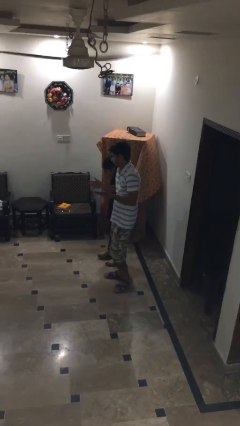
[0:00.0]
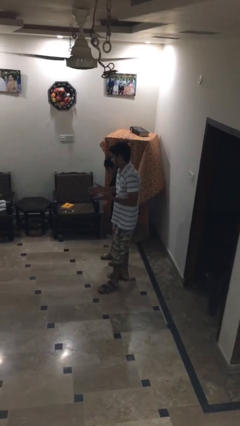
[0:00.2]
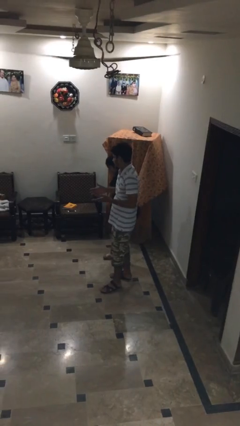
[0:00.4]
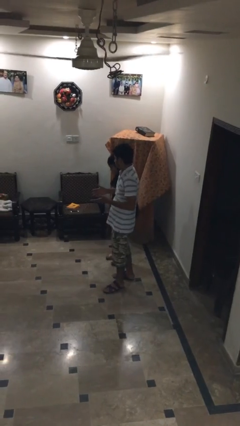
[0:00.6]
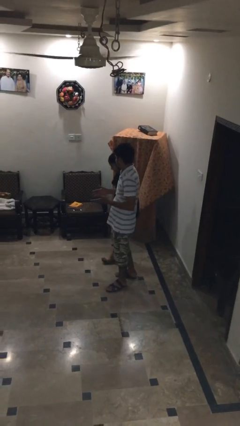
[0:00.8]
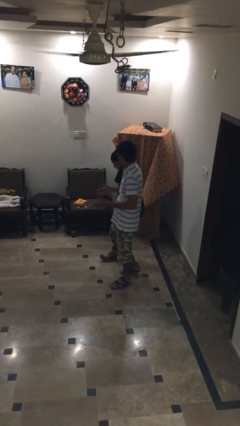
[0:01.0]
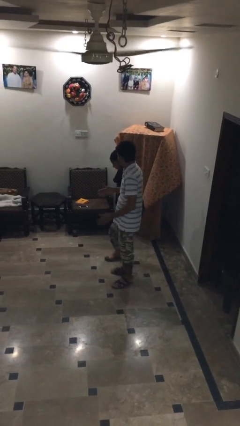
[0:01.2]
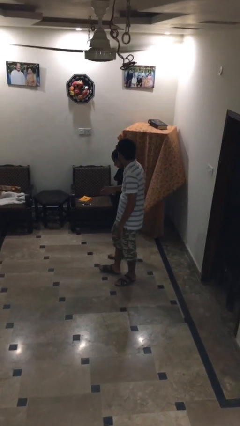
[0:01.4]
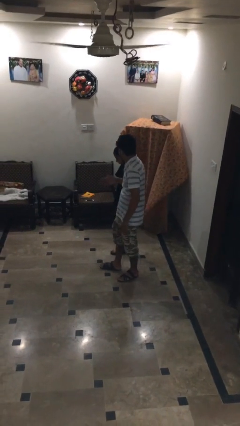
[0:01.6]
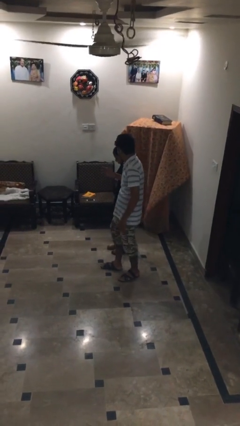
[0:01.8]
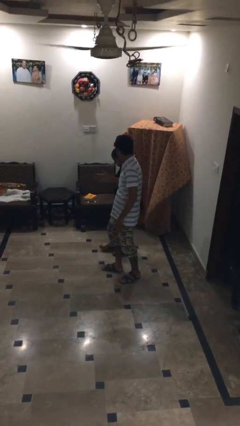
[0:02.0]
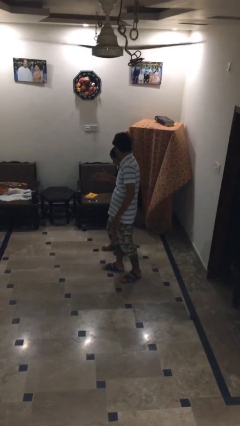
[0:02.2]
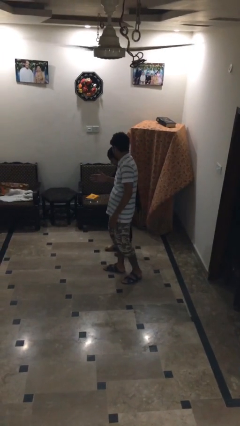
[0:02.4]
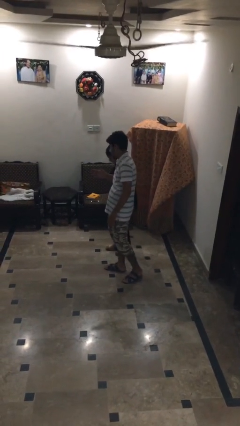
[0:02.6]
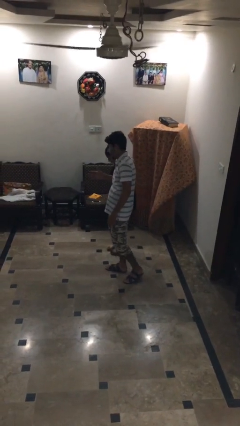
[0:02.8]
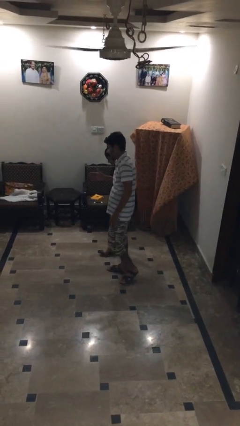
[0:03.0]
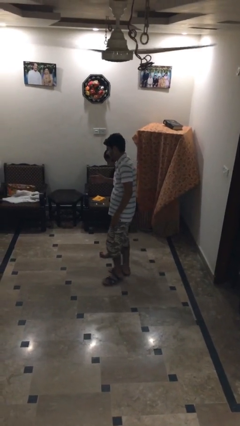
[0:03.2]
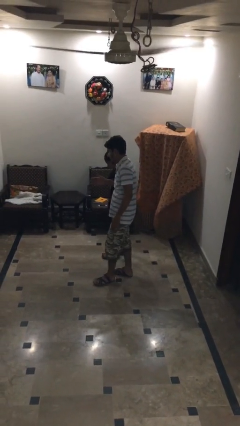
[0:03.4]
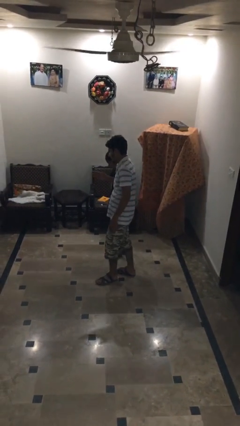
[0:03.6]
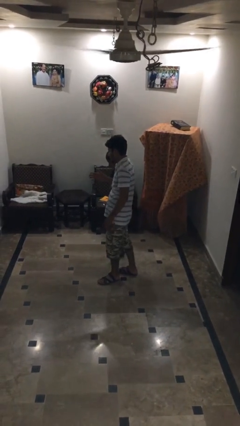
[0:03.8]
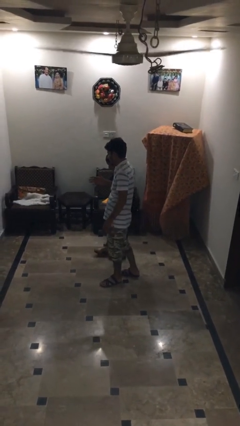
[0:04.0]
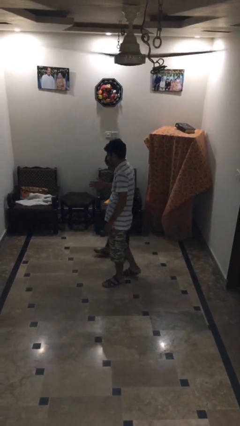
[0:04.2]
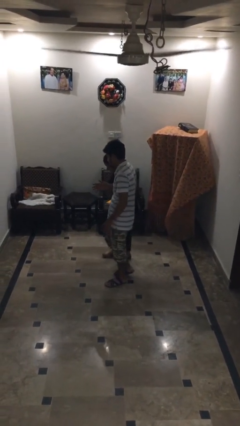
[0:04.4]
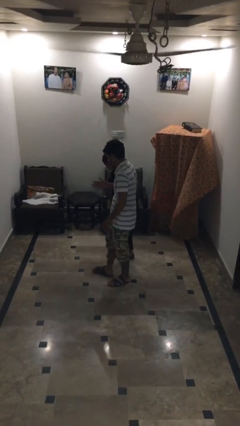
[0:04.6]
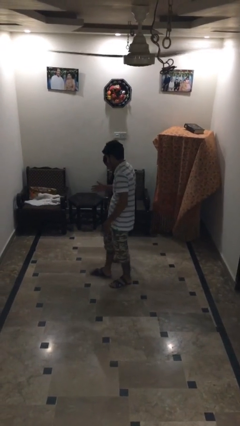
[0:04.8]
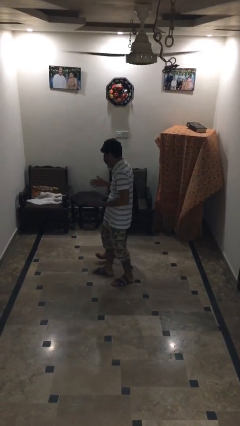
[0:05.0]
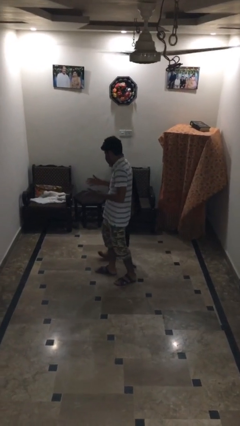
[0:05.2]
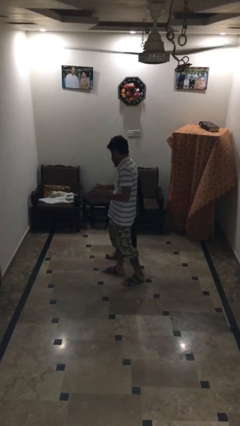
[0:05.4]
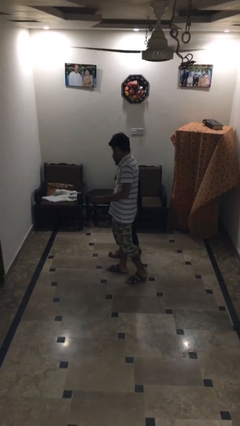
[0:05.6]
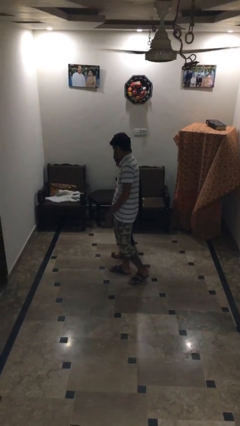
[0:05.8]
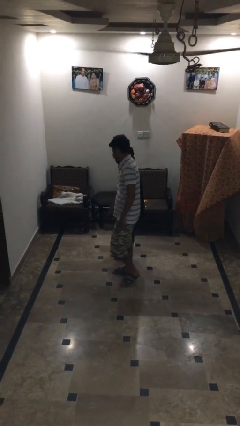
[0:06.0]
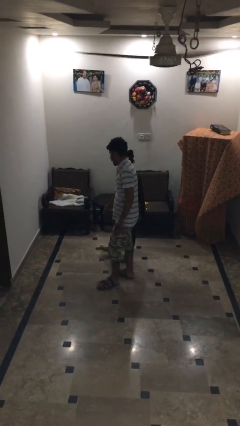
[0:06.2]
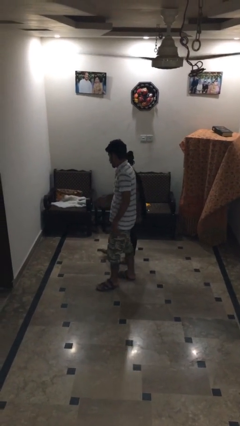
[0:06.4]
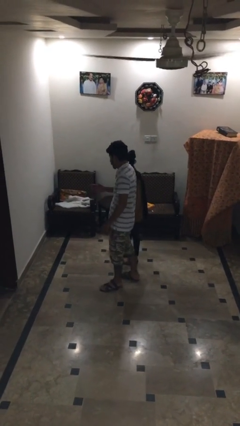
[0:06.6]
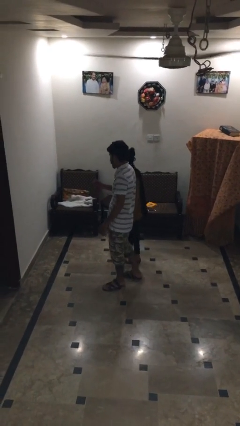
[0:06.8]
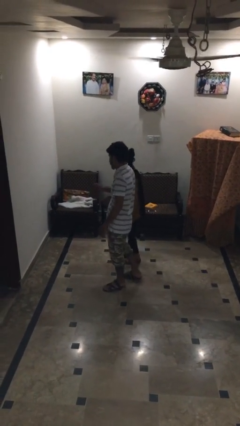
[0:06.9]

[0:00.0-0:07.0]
person talks to person

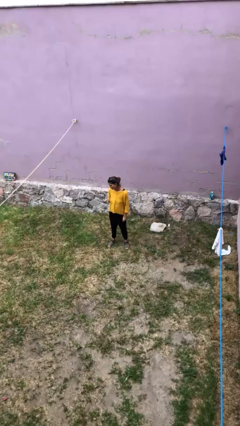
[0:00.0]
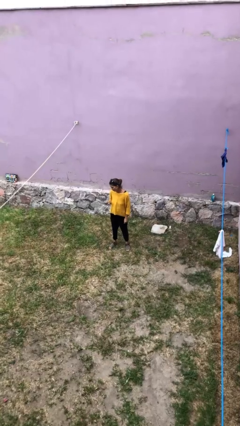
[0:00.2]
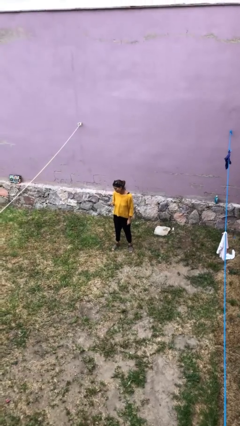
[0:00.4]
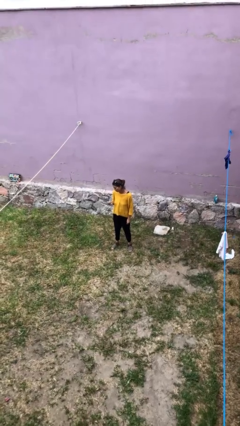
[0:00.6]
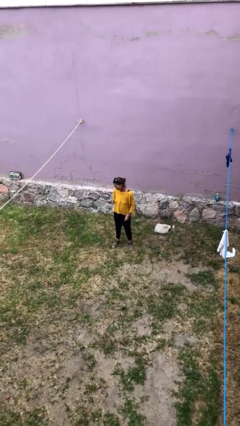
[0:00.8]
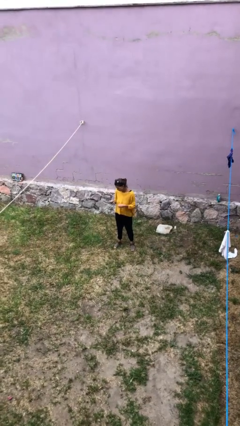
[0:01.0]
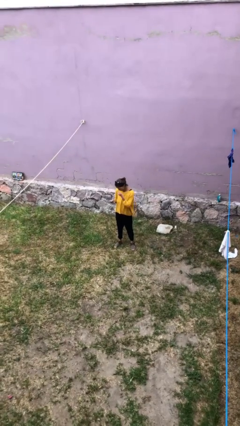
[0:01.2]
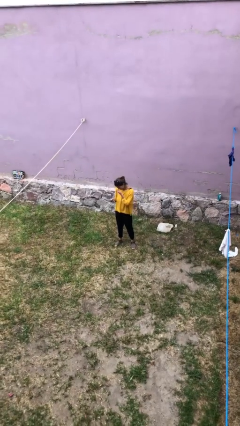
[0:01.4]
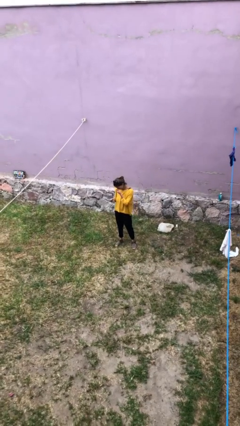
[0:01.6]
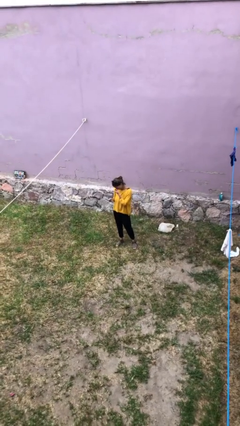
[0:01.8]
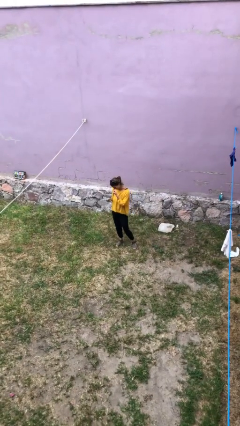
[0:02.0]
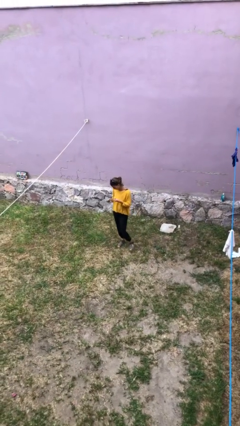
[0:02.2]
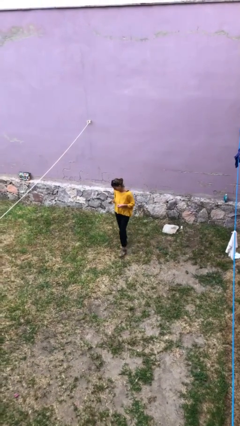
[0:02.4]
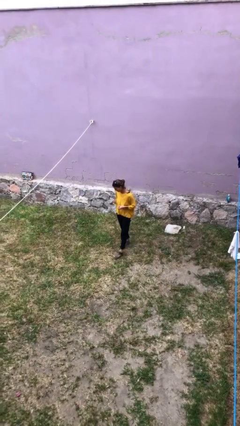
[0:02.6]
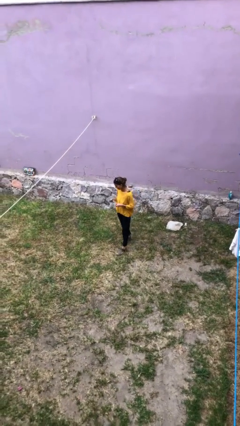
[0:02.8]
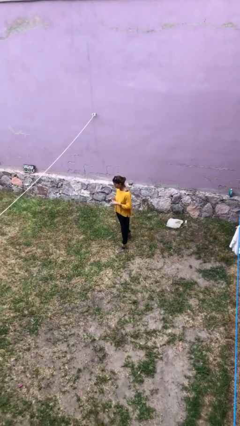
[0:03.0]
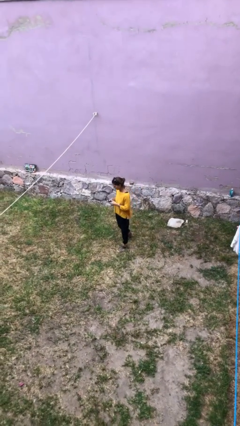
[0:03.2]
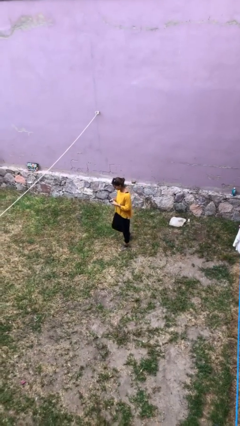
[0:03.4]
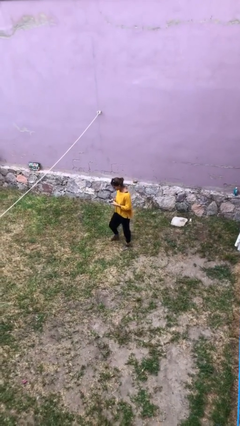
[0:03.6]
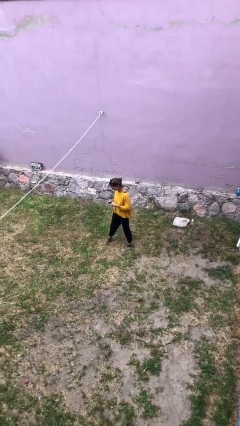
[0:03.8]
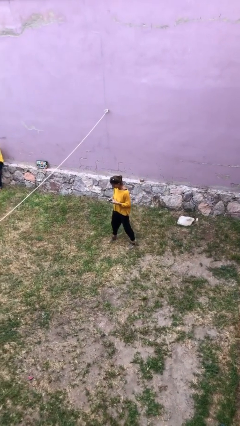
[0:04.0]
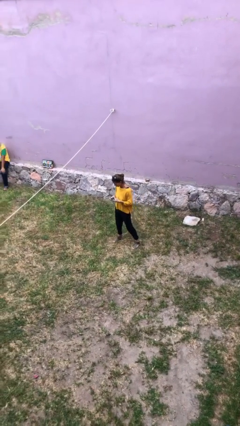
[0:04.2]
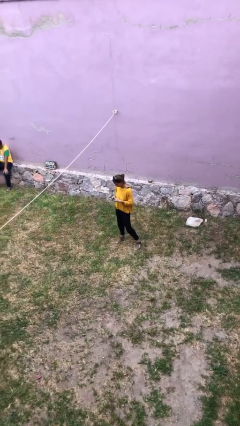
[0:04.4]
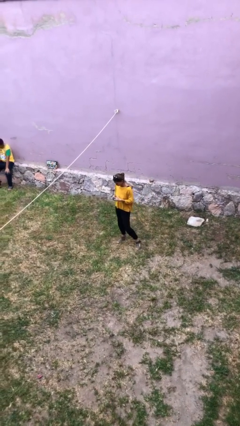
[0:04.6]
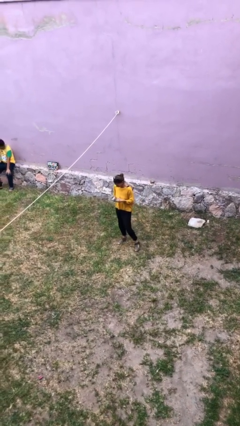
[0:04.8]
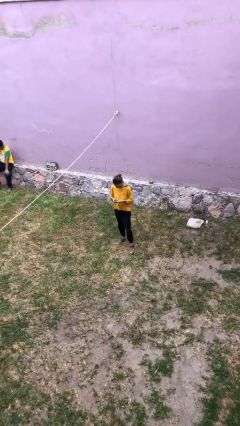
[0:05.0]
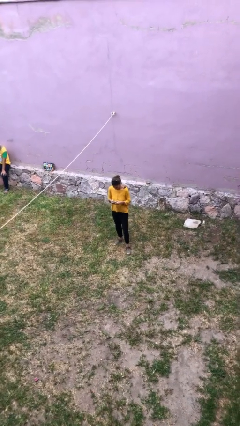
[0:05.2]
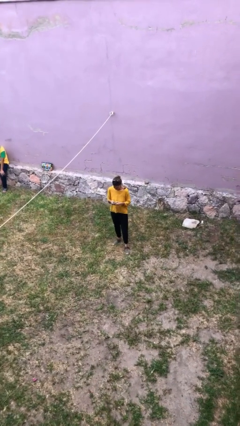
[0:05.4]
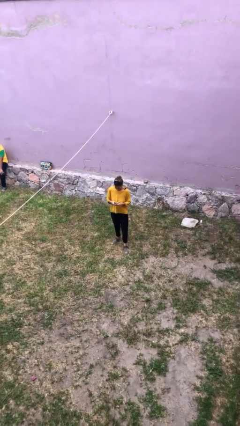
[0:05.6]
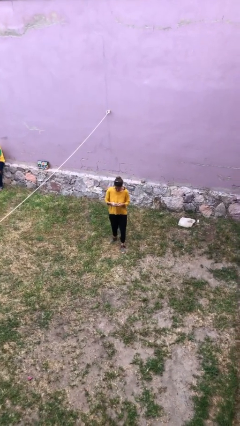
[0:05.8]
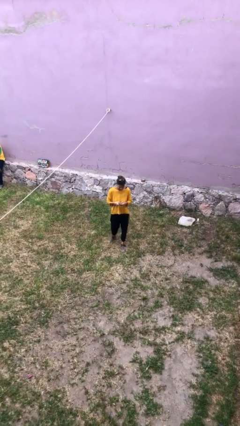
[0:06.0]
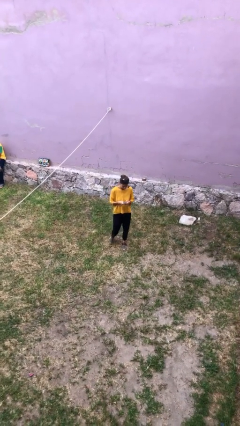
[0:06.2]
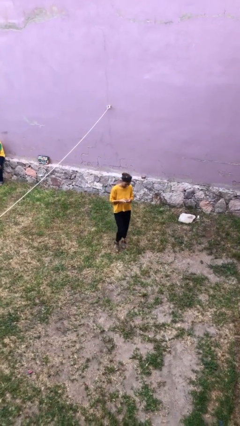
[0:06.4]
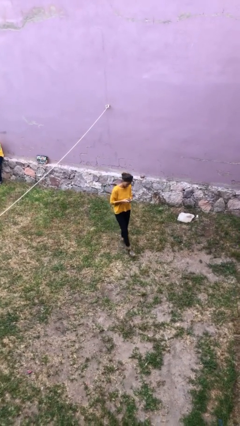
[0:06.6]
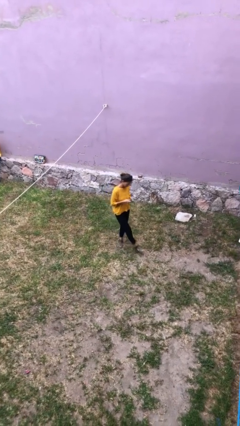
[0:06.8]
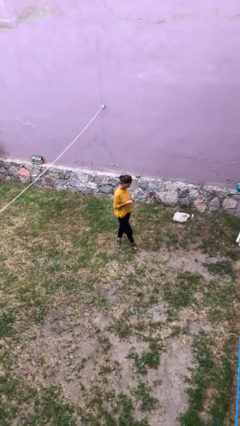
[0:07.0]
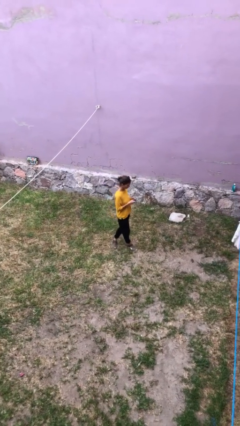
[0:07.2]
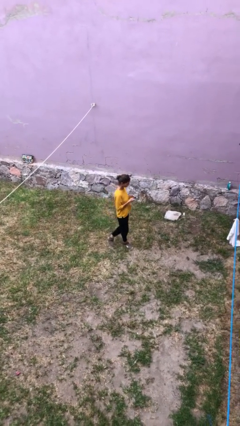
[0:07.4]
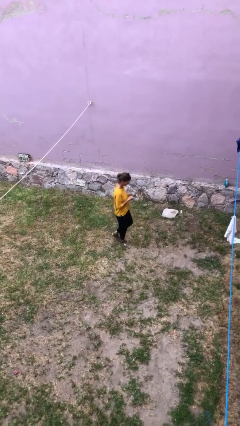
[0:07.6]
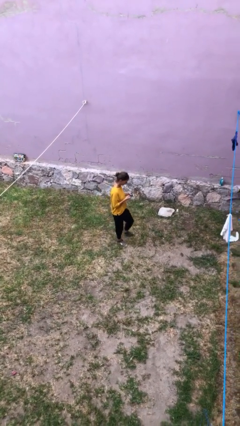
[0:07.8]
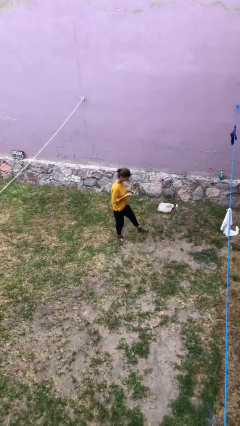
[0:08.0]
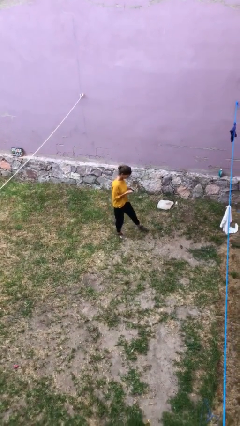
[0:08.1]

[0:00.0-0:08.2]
person texts on phone

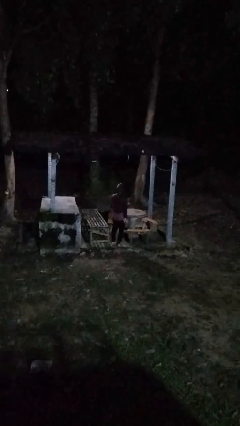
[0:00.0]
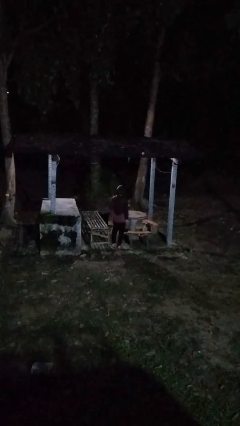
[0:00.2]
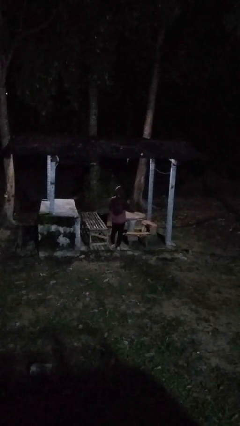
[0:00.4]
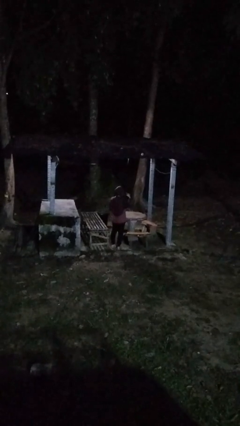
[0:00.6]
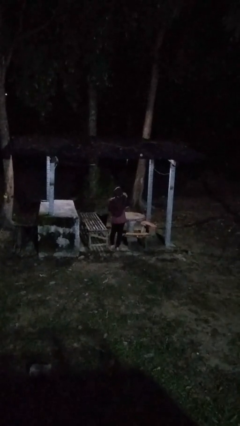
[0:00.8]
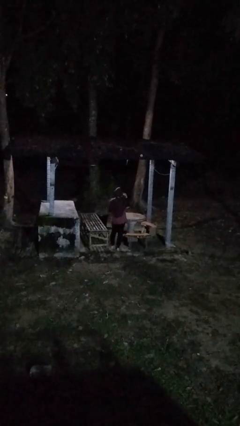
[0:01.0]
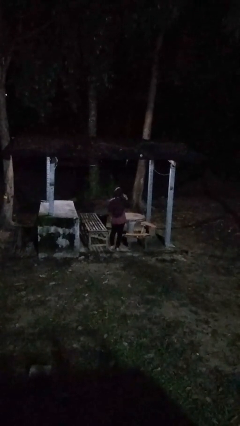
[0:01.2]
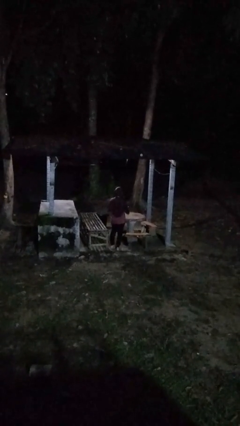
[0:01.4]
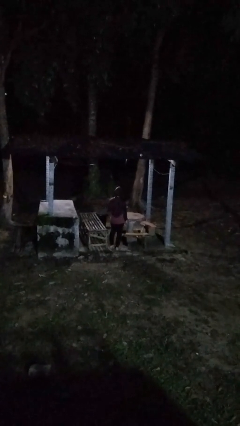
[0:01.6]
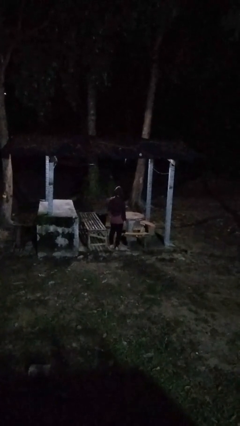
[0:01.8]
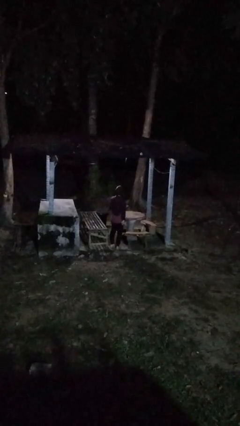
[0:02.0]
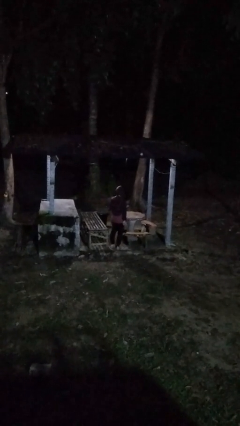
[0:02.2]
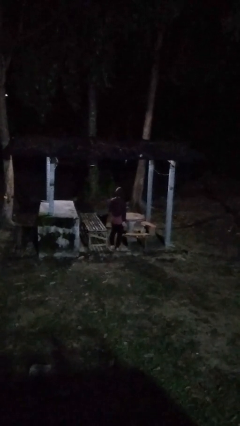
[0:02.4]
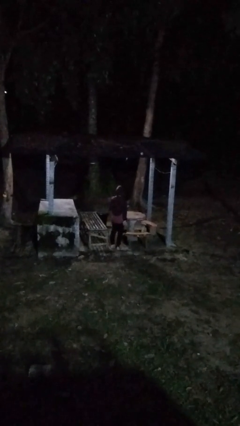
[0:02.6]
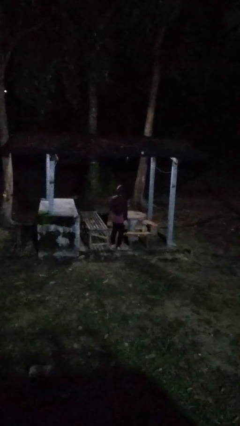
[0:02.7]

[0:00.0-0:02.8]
person gestures watch closely

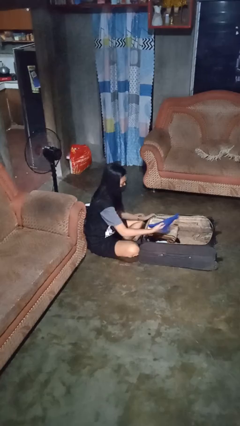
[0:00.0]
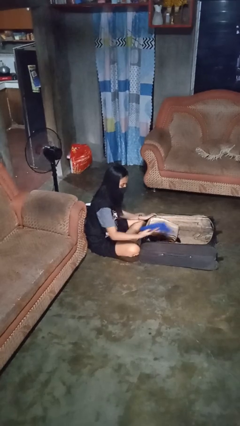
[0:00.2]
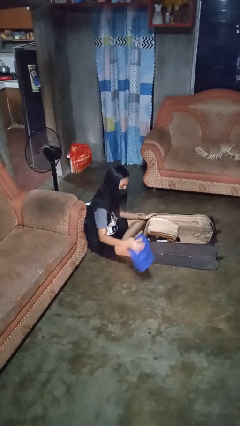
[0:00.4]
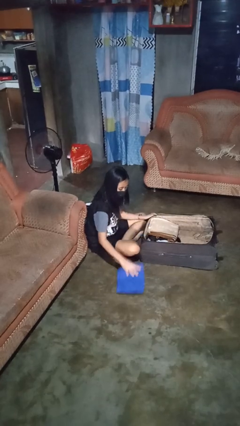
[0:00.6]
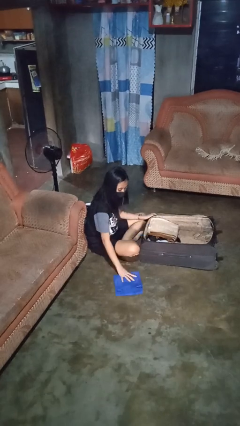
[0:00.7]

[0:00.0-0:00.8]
person unloads clothes from suitcase
